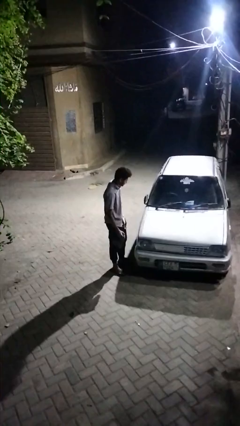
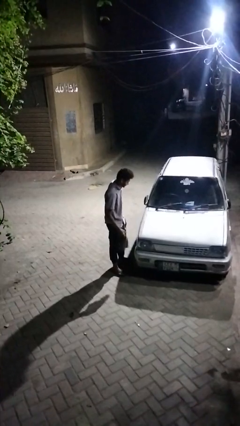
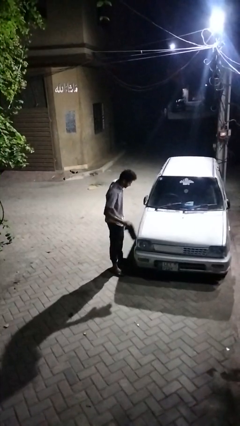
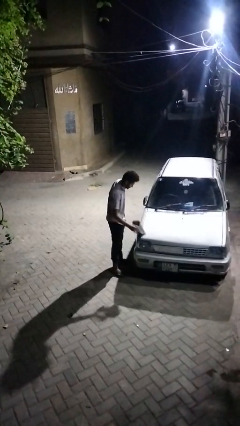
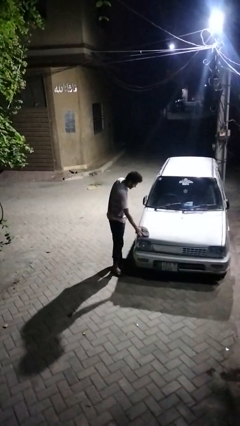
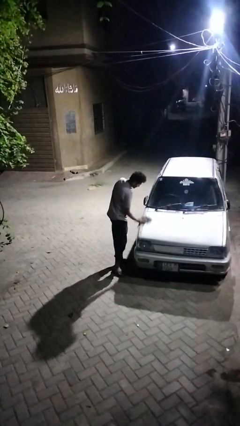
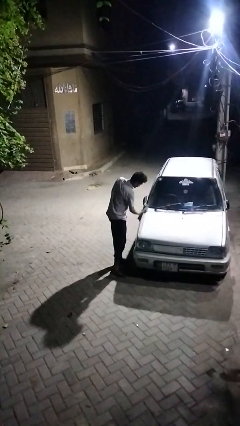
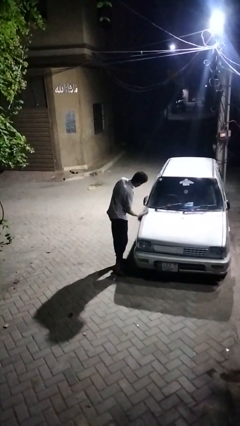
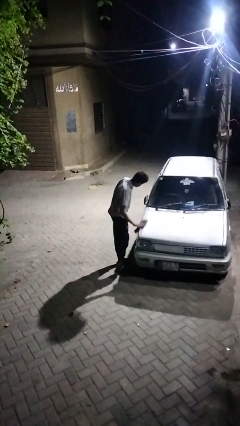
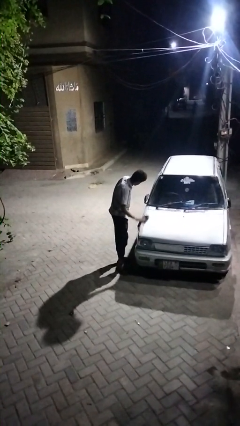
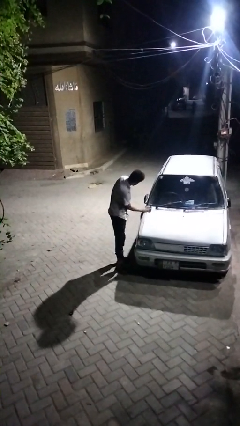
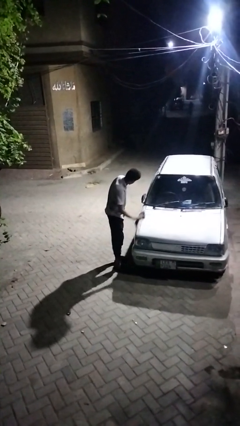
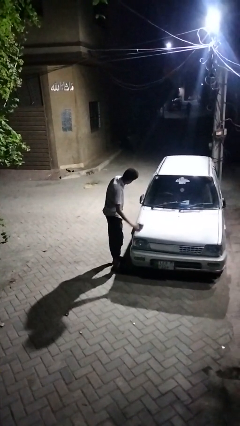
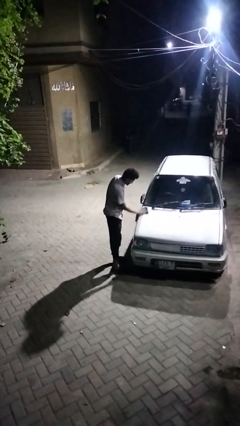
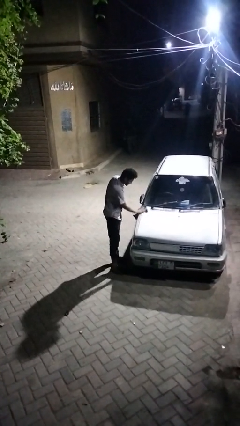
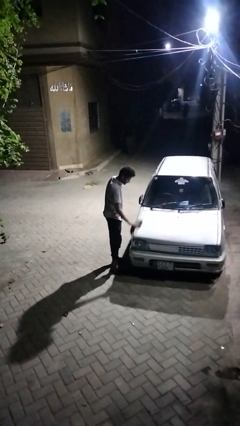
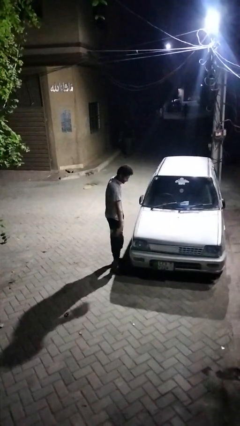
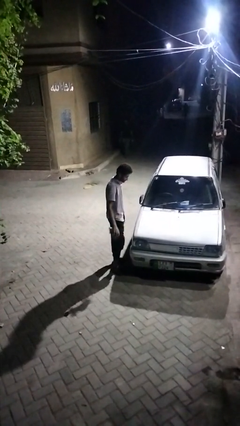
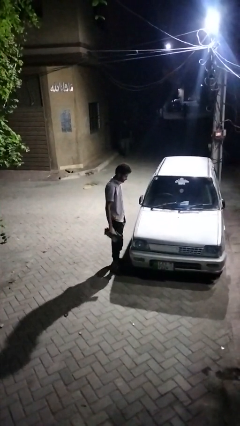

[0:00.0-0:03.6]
person polishes car with rag

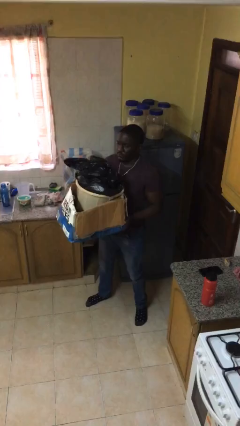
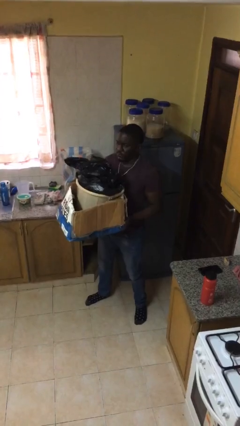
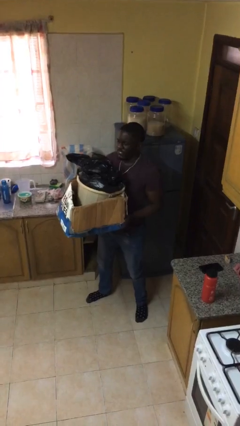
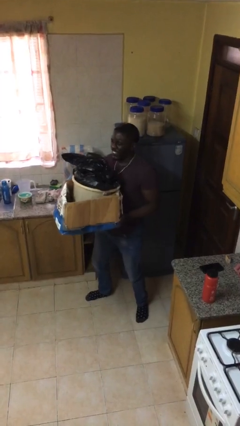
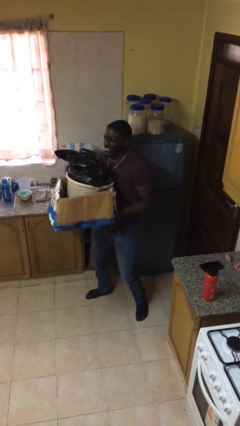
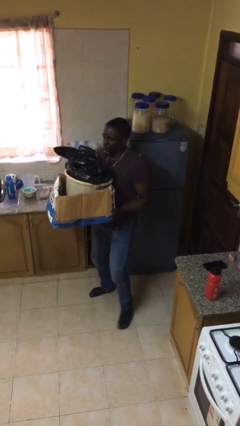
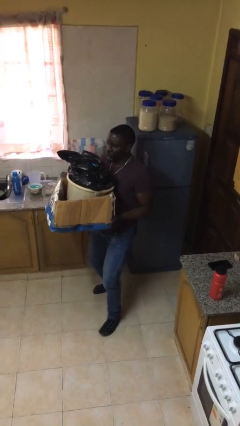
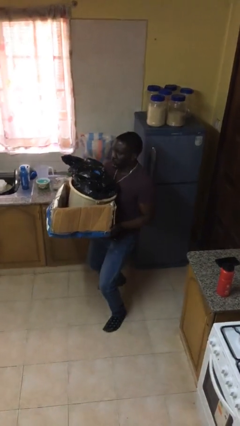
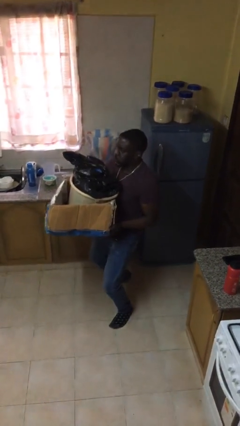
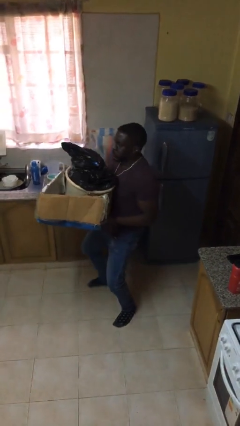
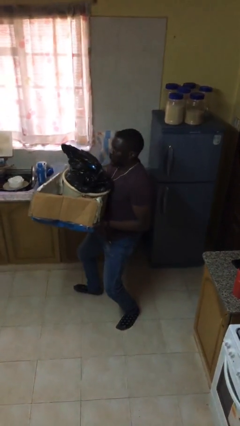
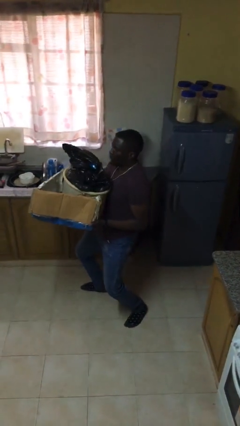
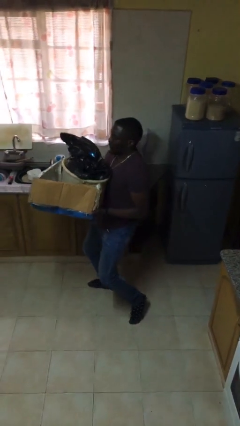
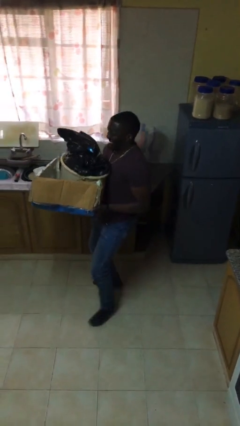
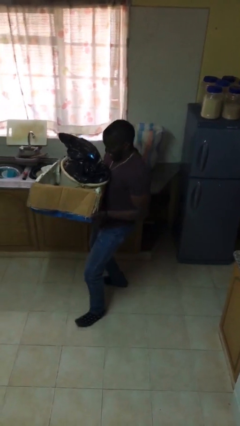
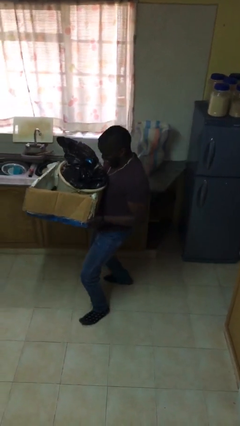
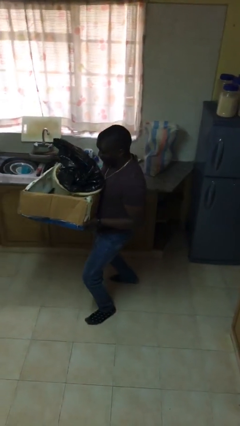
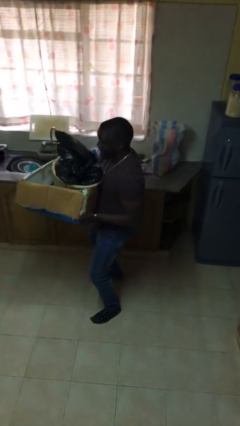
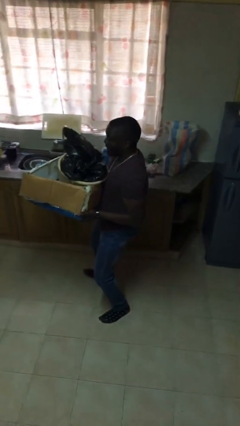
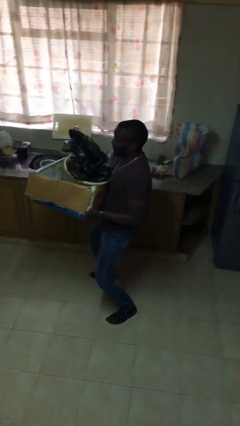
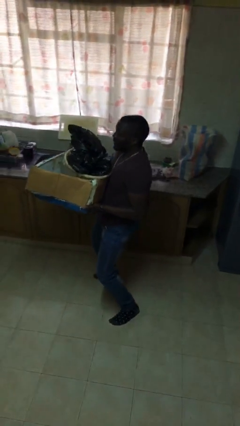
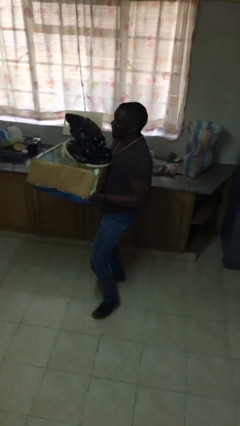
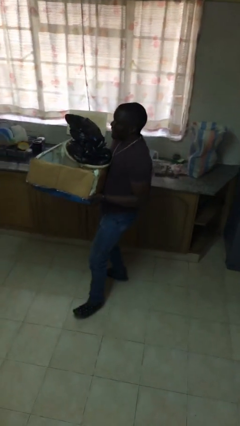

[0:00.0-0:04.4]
person carries heavy object

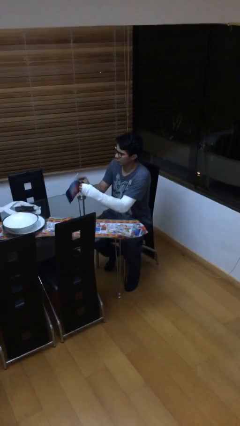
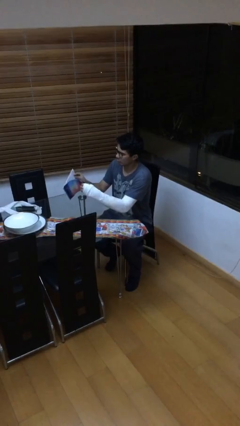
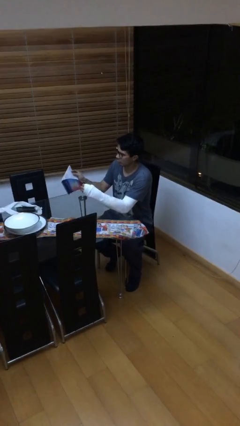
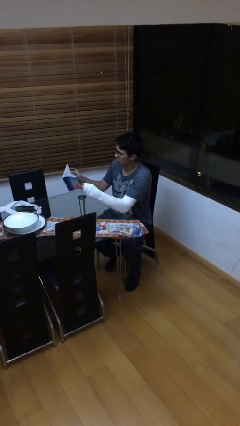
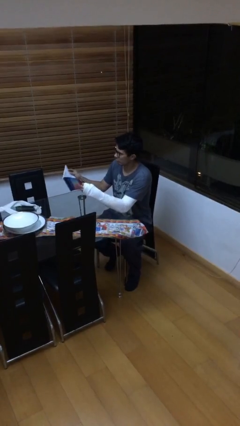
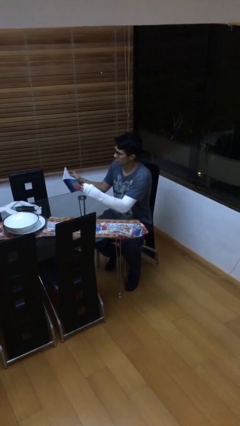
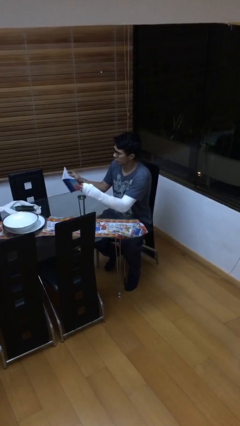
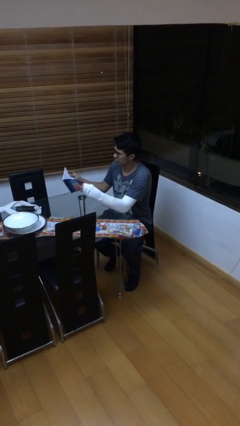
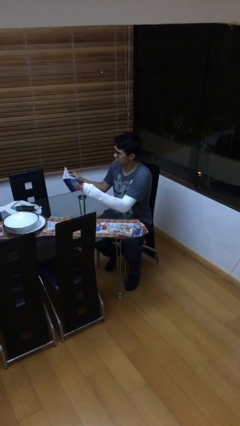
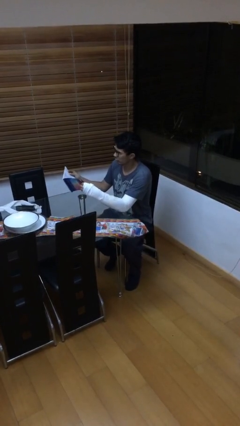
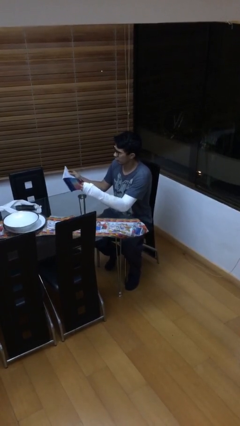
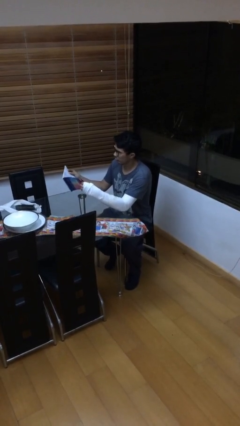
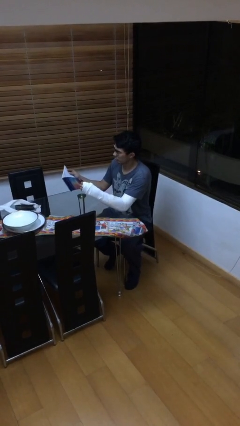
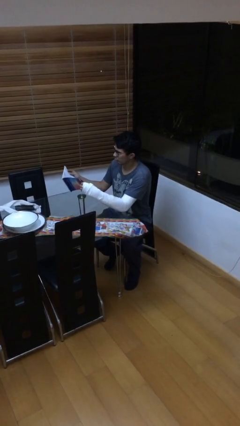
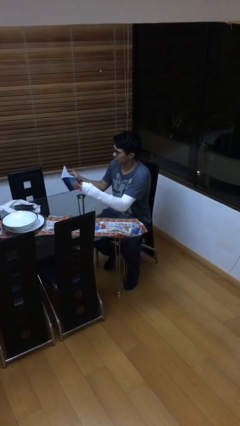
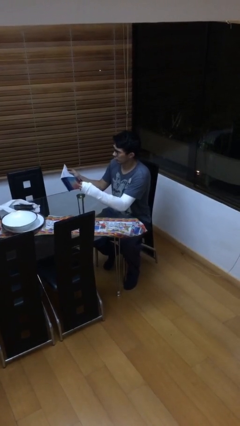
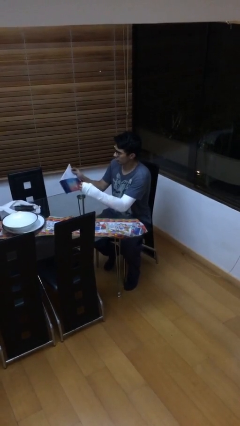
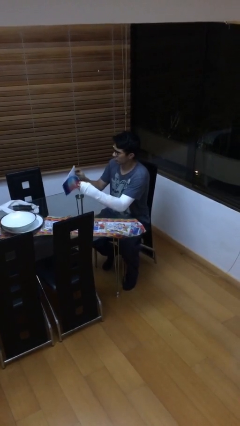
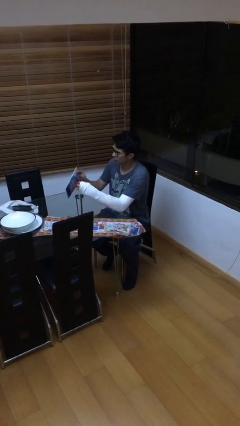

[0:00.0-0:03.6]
person reads document

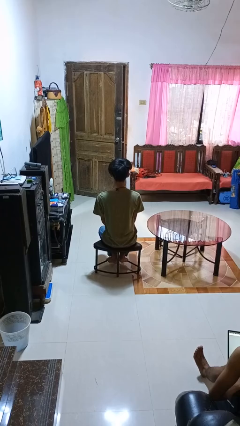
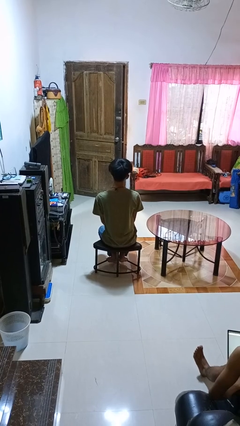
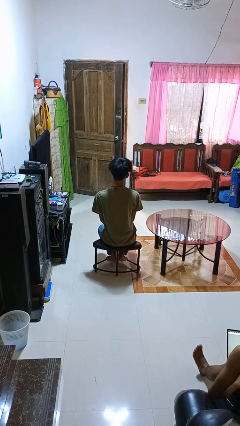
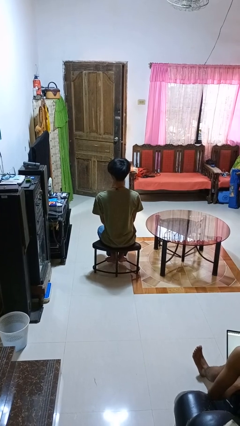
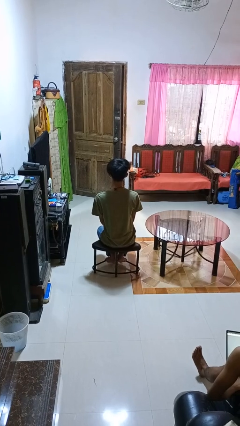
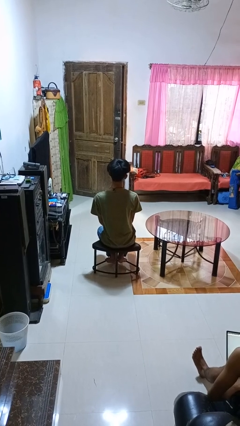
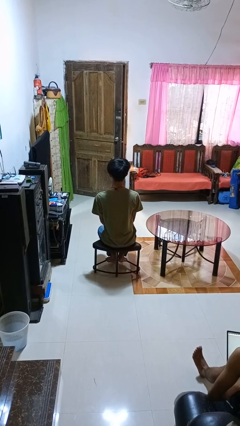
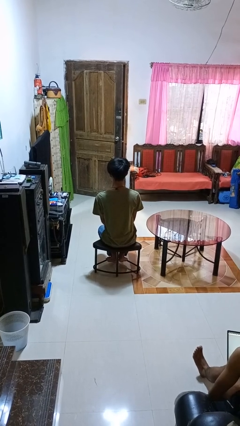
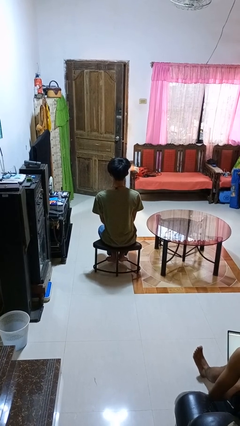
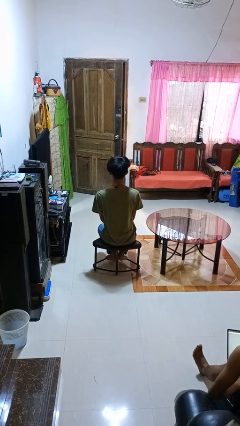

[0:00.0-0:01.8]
person shakes head

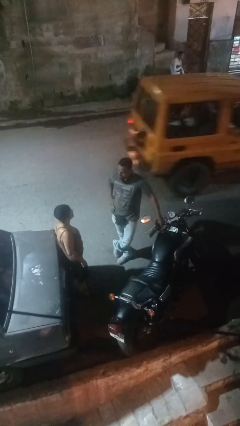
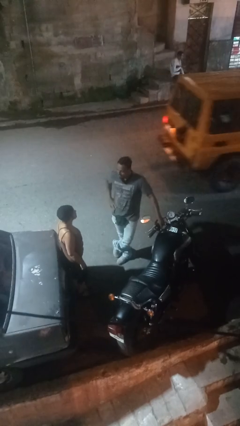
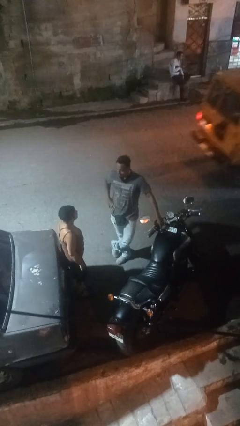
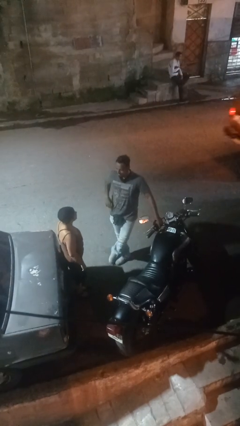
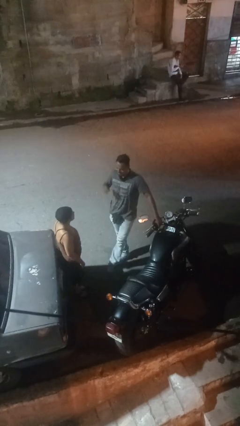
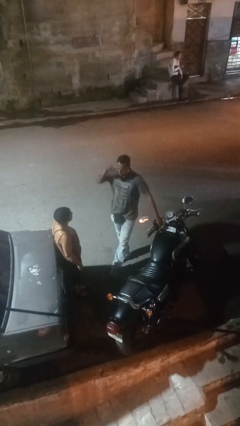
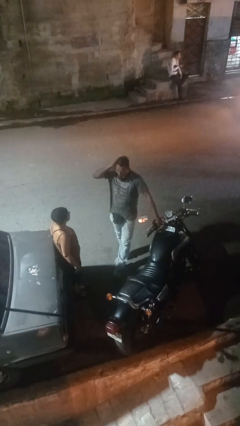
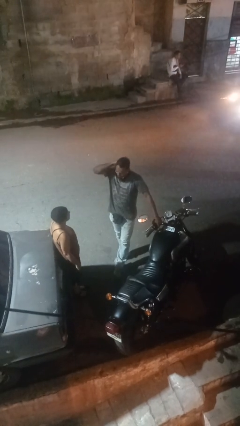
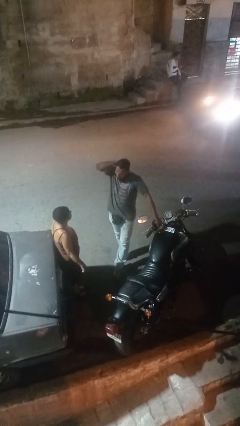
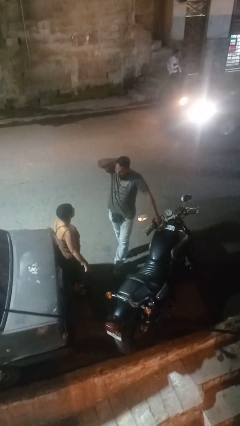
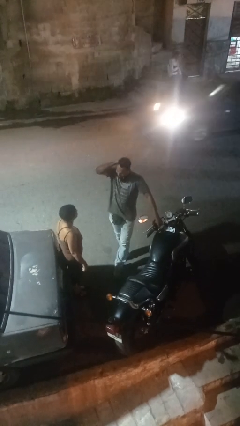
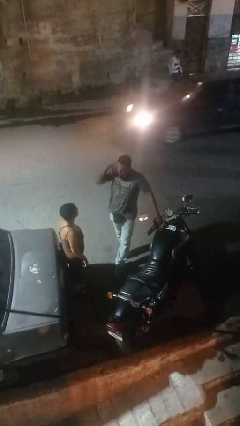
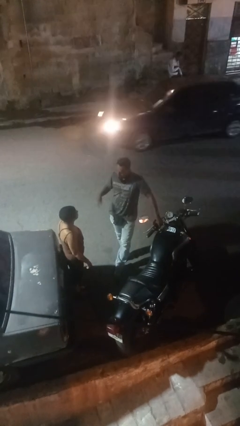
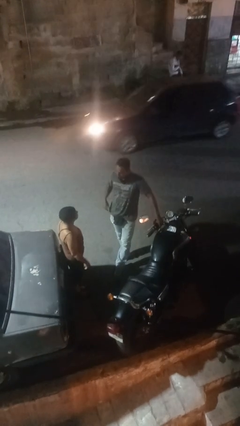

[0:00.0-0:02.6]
person talks to person

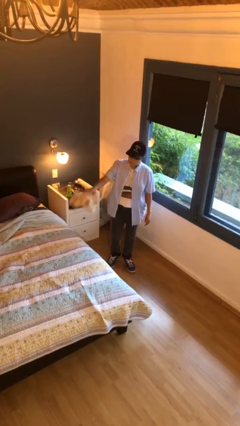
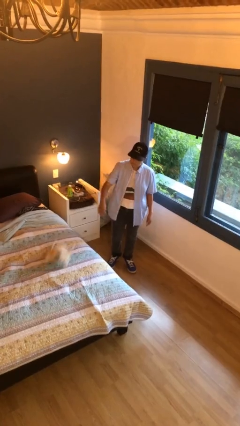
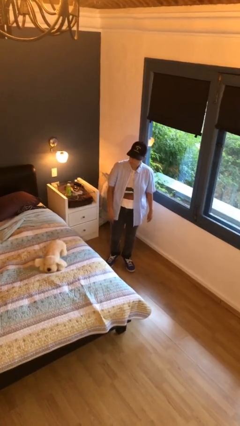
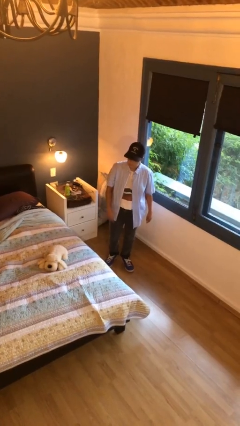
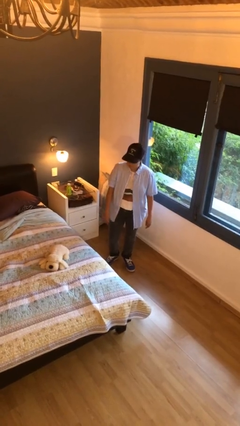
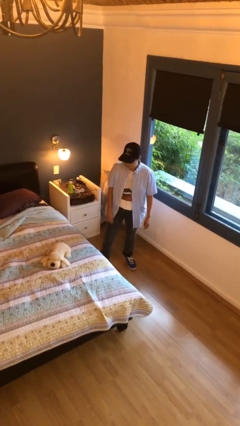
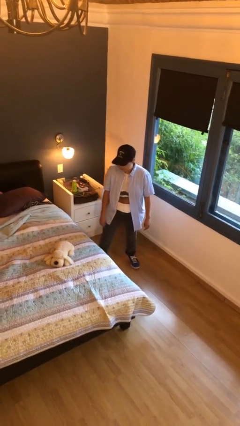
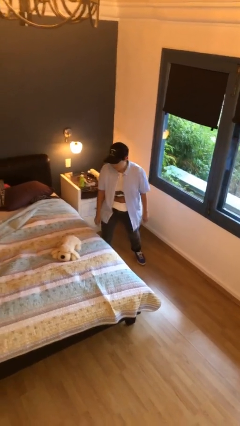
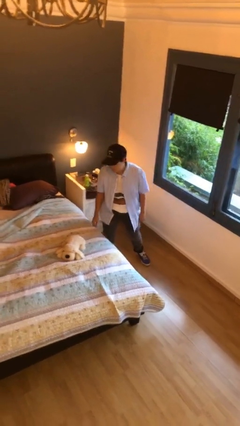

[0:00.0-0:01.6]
person throws object on bed
